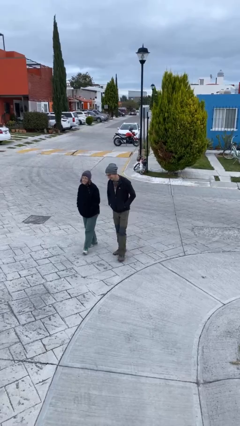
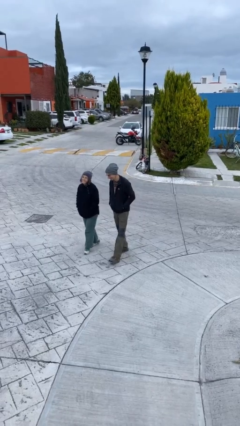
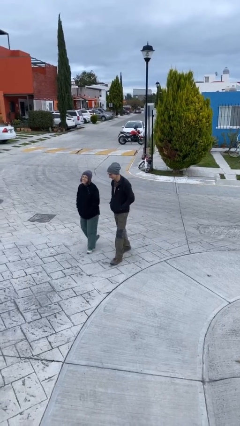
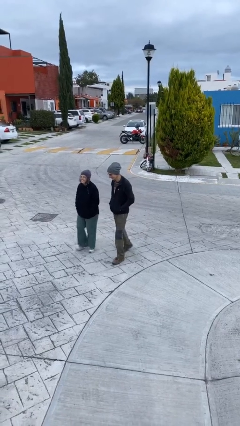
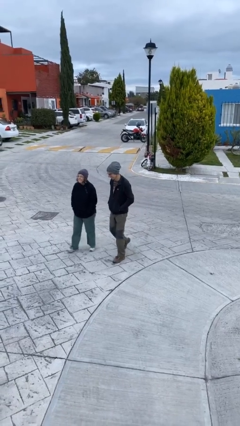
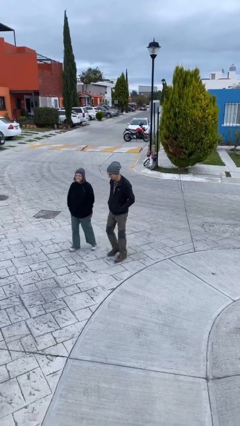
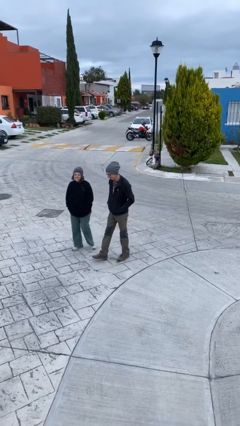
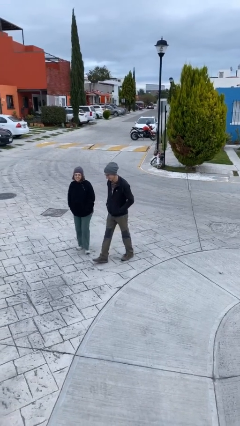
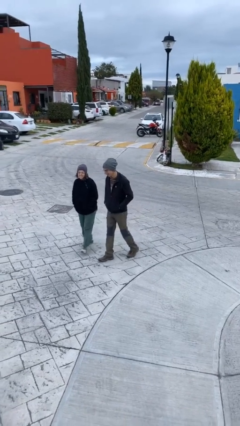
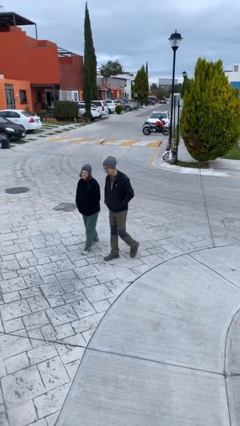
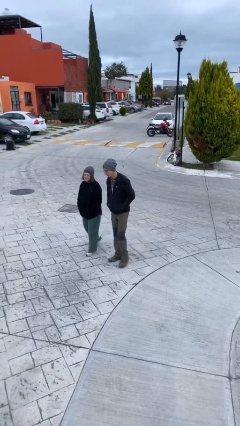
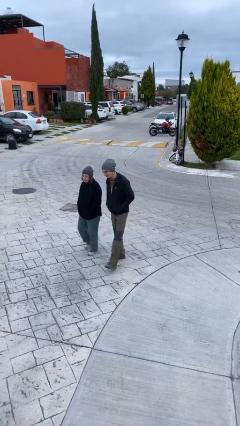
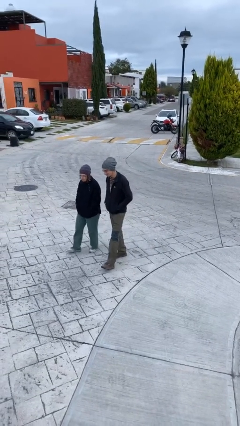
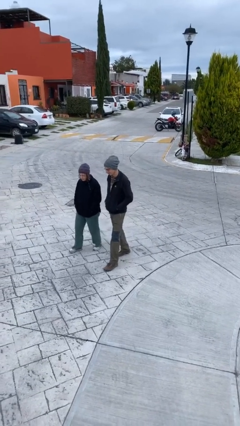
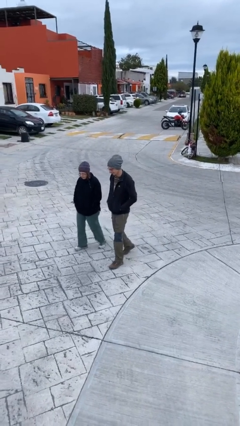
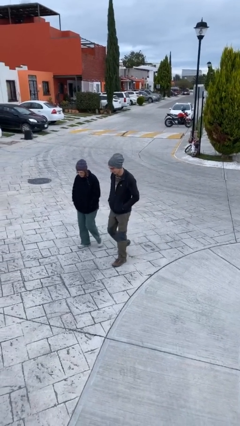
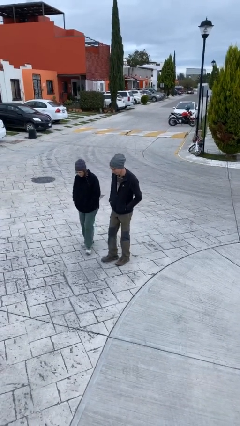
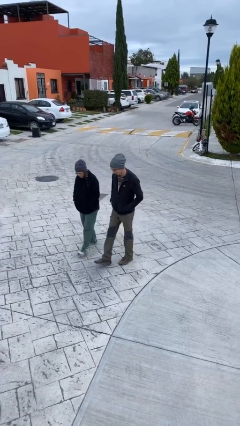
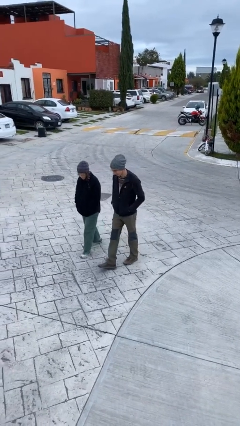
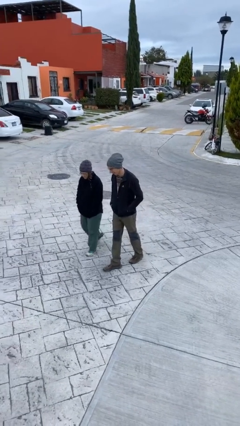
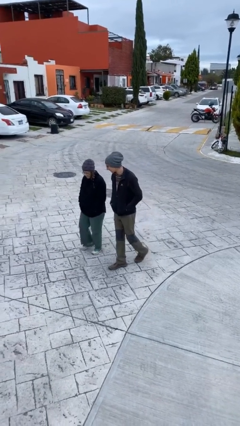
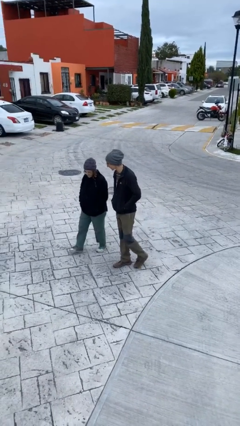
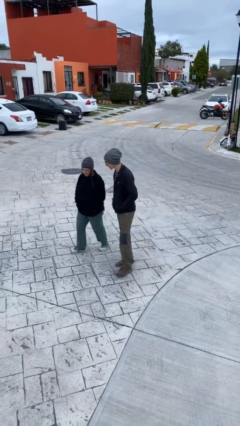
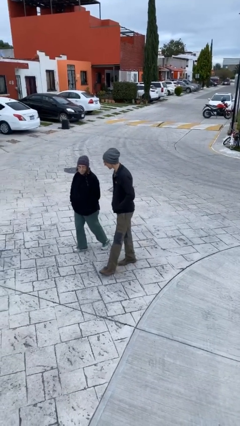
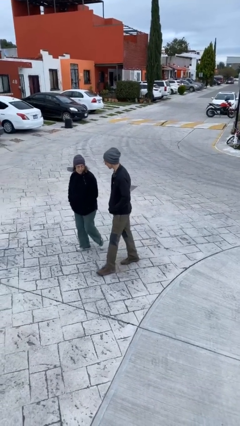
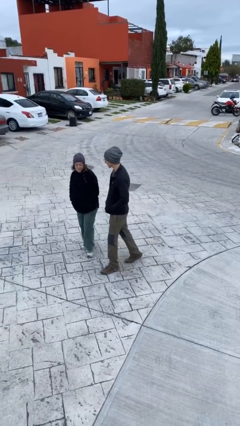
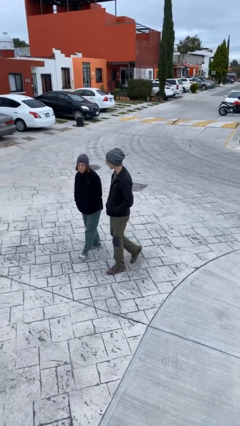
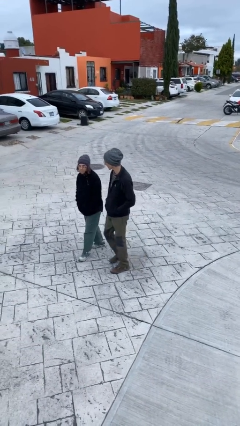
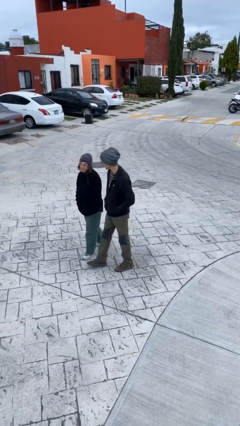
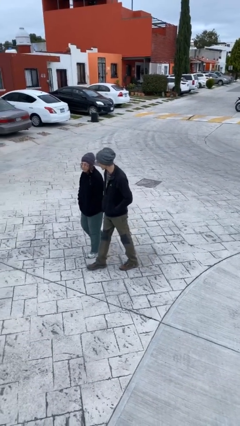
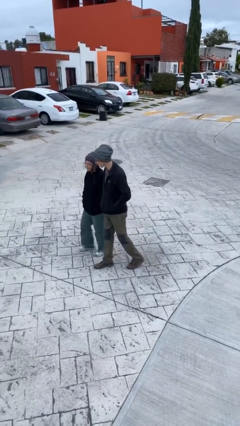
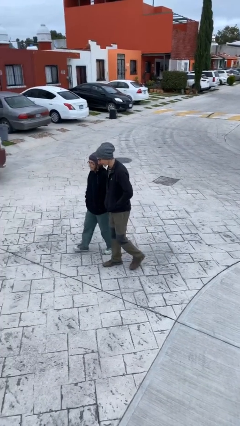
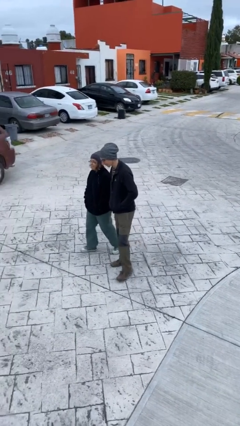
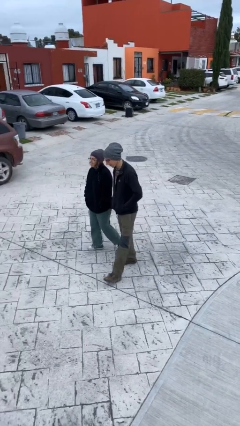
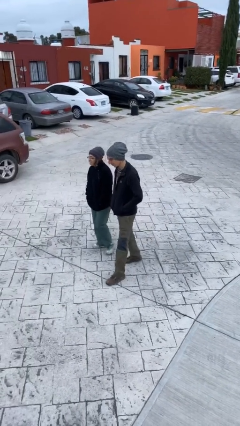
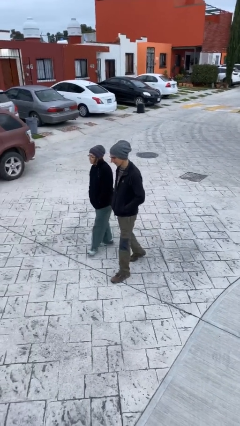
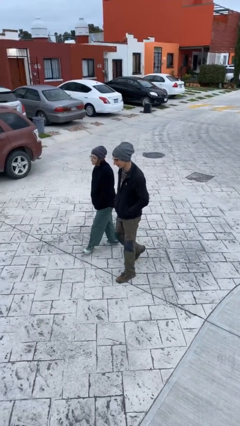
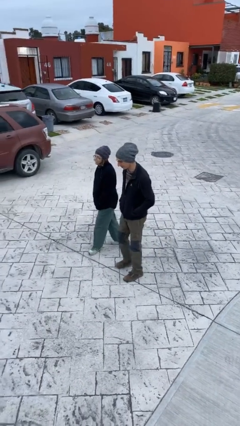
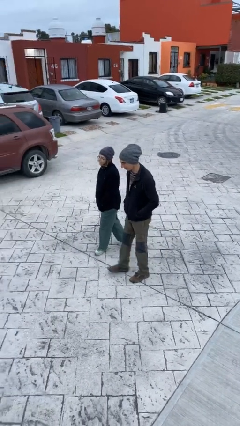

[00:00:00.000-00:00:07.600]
person talks to person

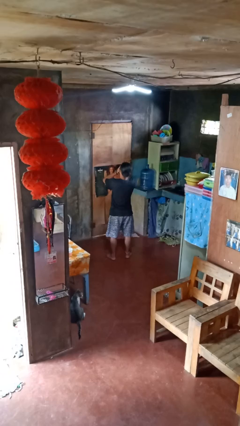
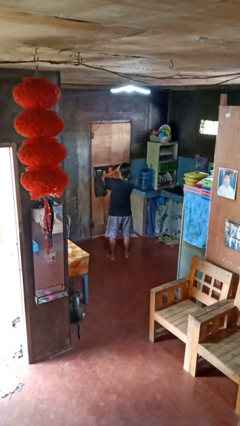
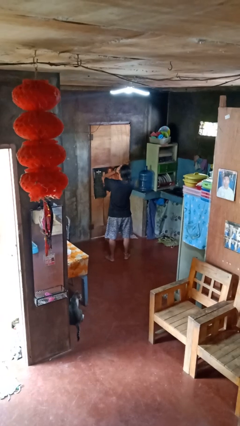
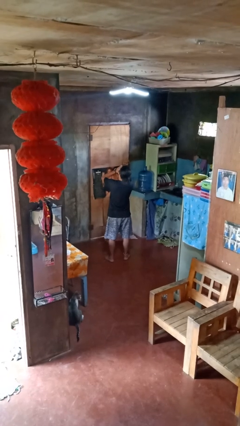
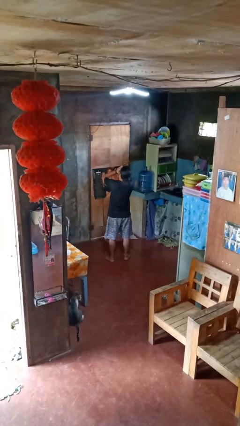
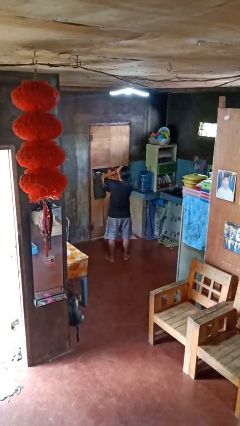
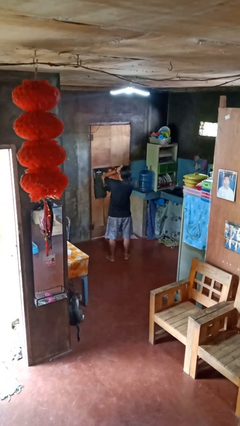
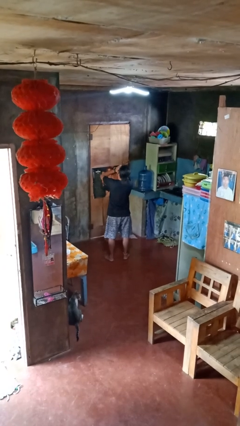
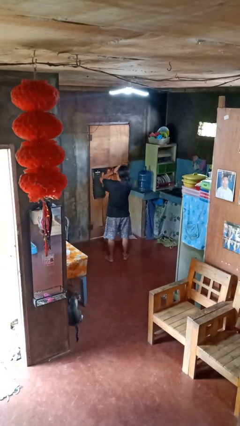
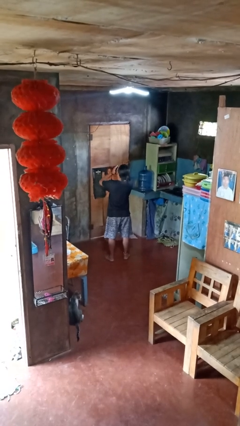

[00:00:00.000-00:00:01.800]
person yawns

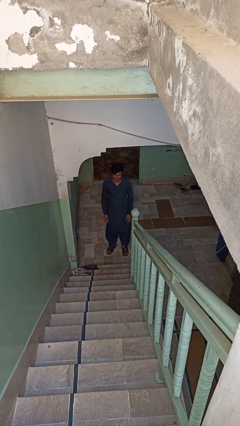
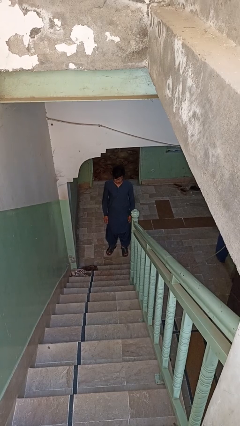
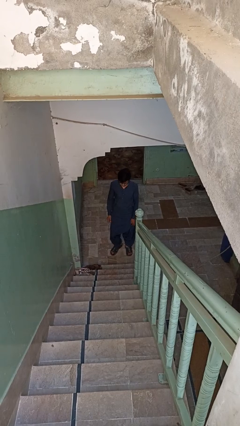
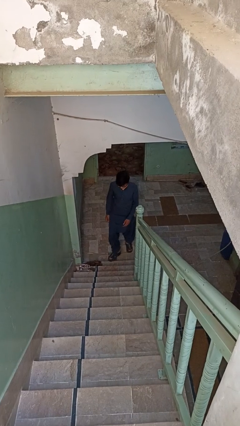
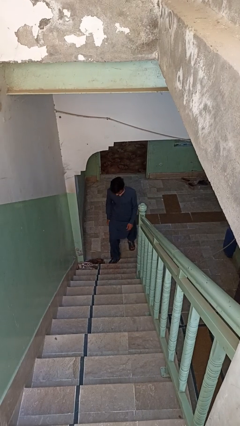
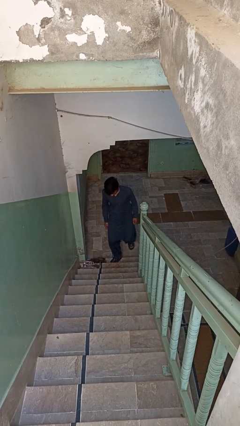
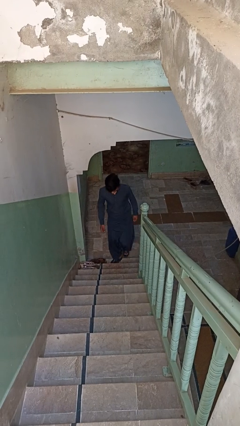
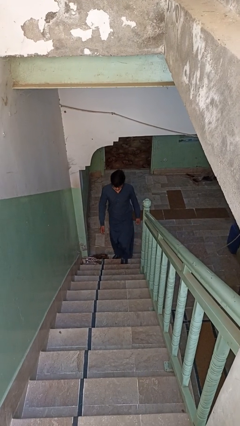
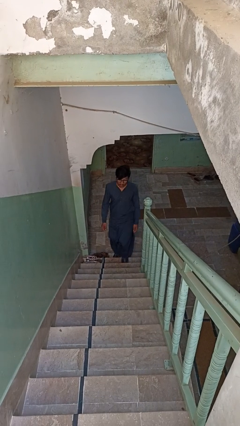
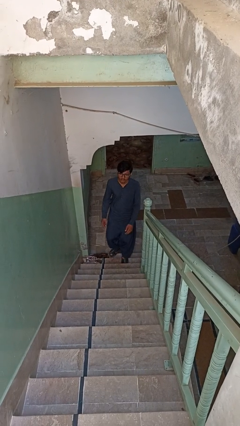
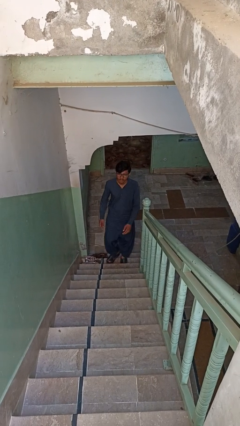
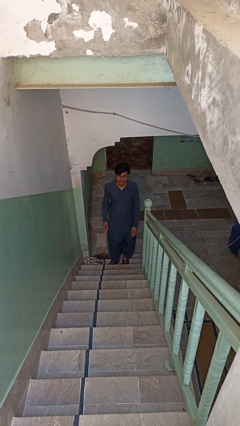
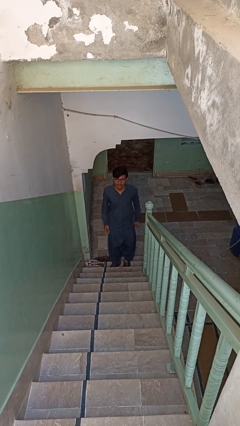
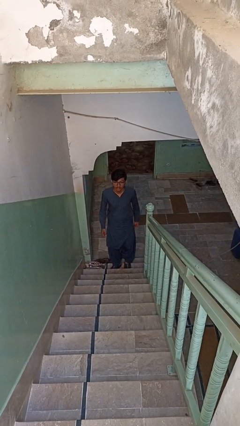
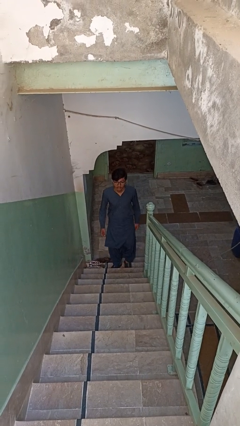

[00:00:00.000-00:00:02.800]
person climbs up stairs

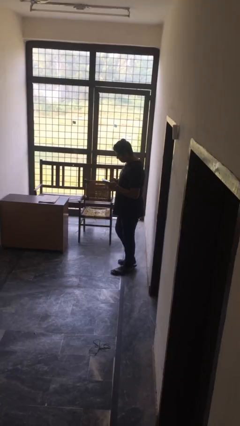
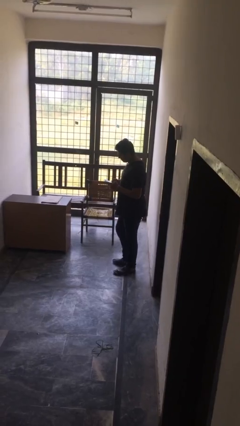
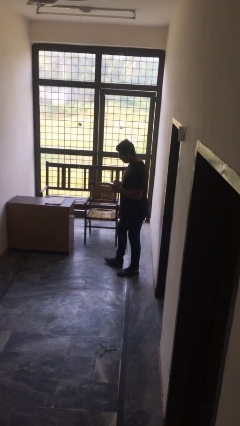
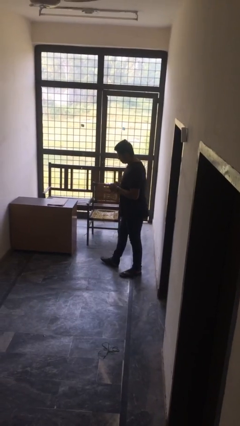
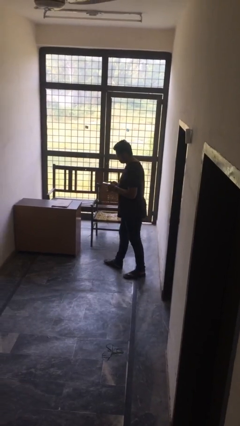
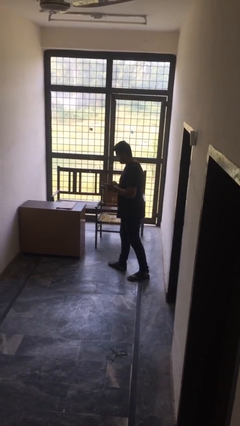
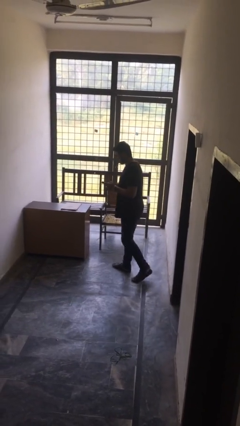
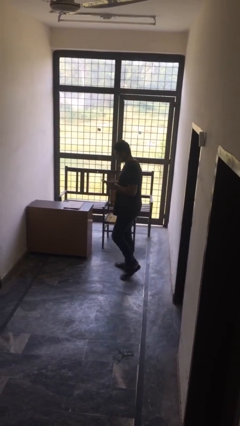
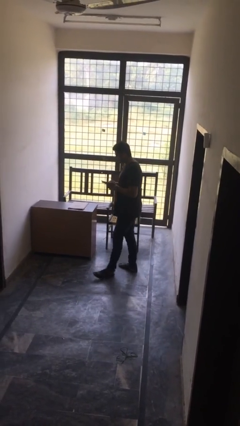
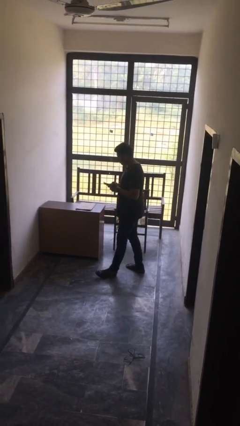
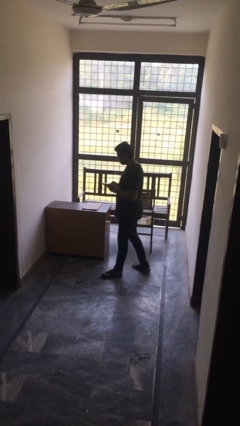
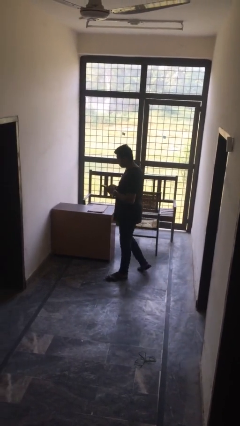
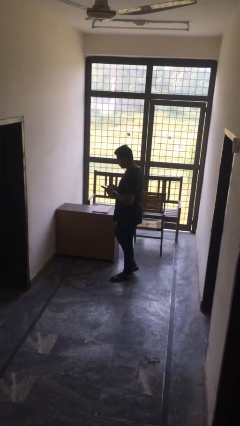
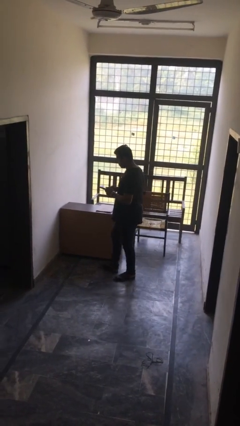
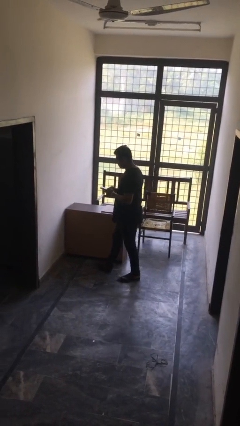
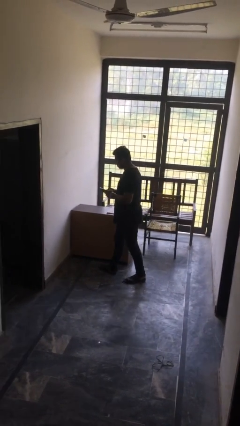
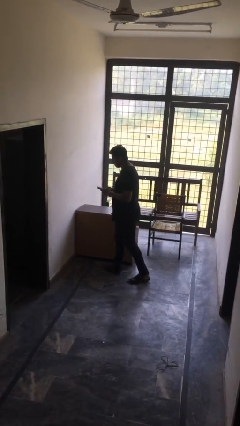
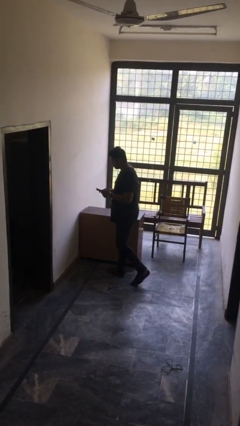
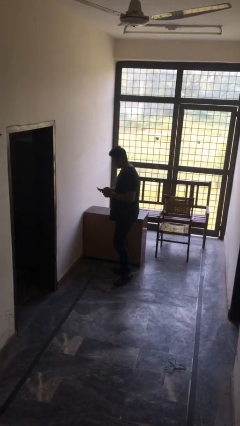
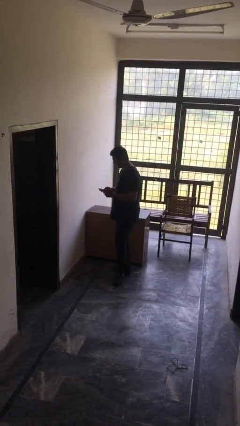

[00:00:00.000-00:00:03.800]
person texts on phone

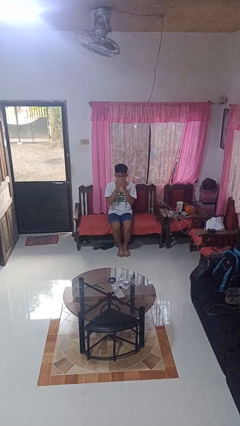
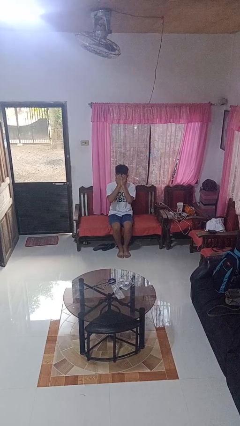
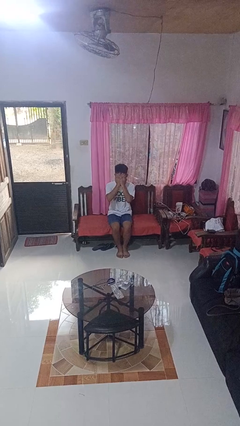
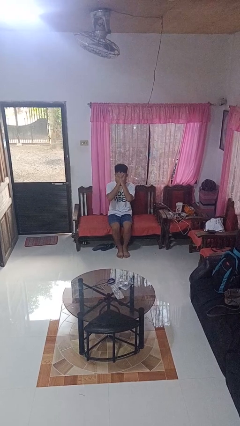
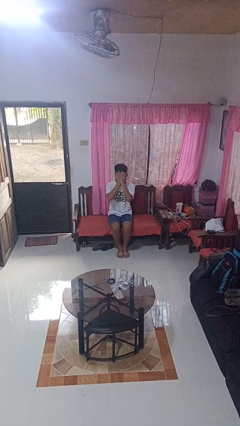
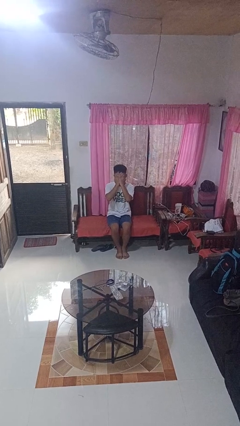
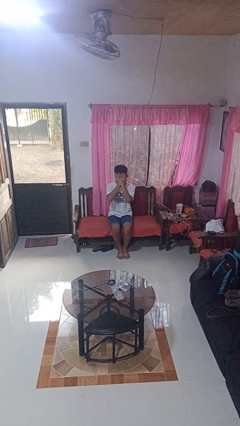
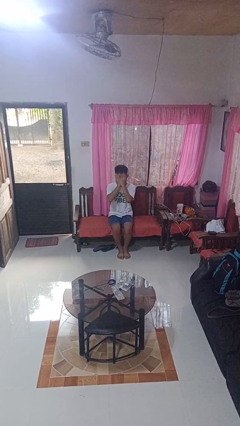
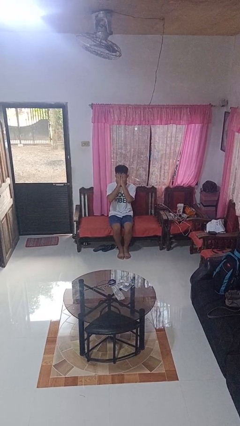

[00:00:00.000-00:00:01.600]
person covers face with hands
